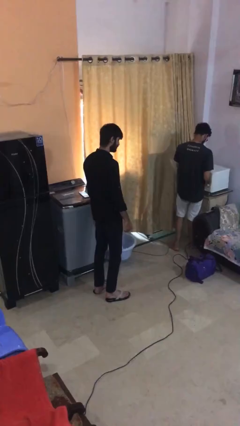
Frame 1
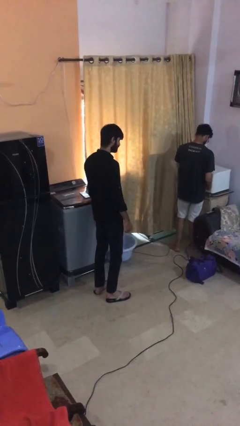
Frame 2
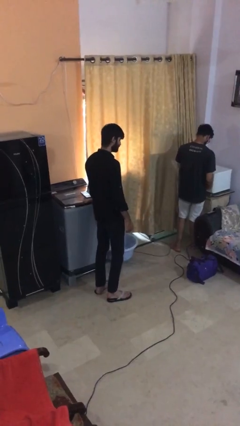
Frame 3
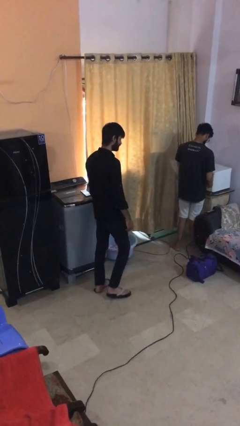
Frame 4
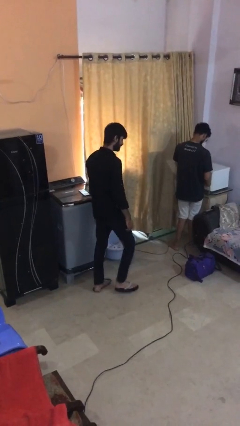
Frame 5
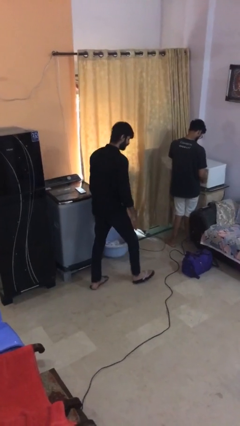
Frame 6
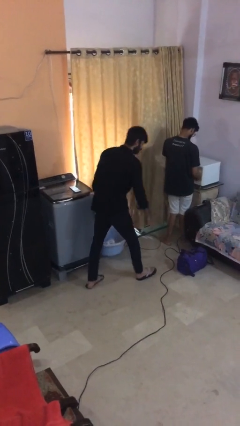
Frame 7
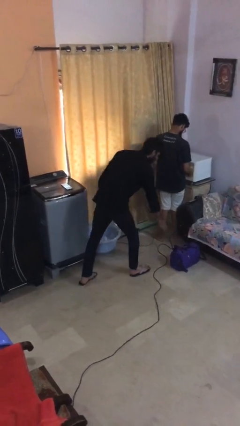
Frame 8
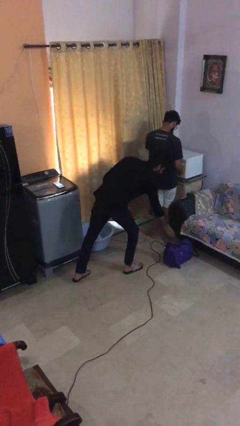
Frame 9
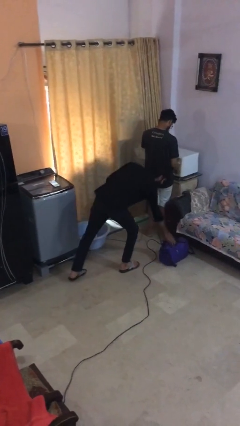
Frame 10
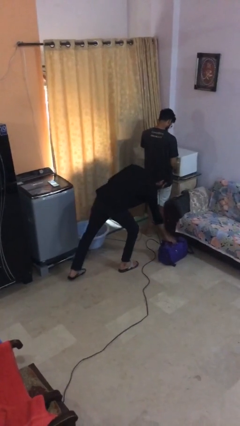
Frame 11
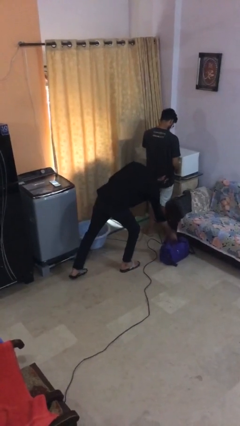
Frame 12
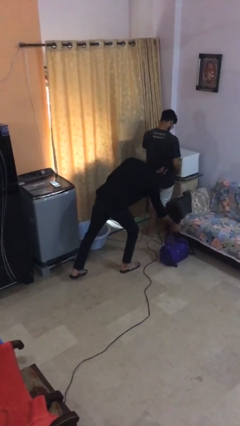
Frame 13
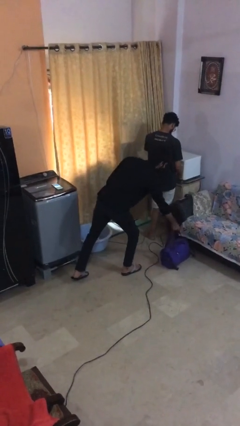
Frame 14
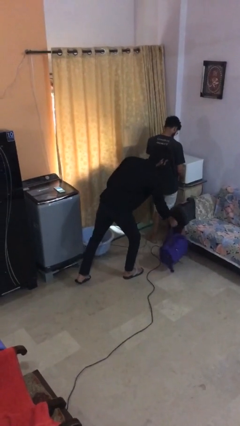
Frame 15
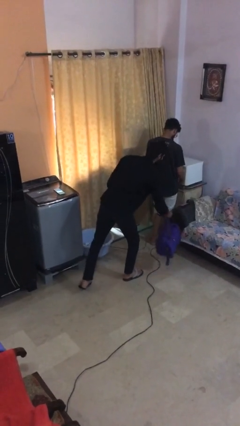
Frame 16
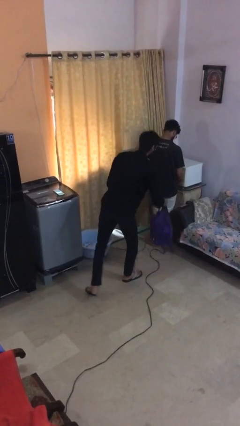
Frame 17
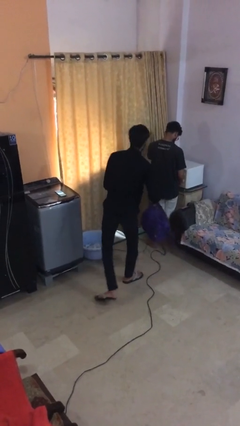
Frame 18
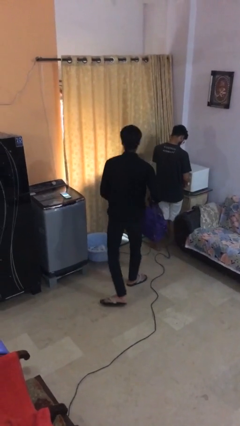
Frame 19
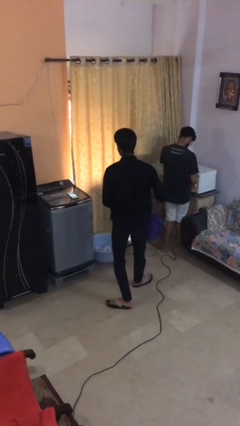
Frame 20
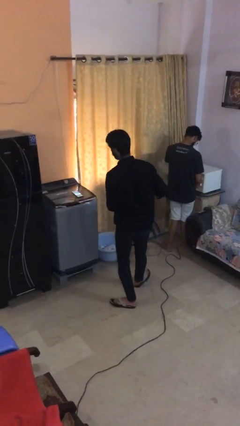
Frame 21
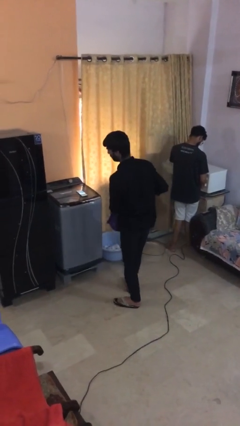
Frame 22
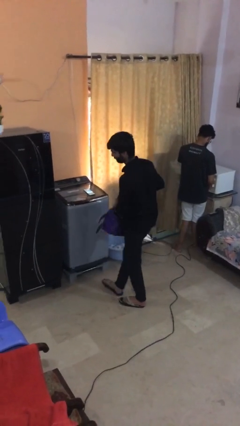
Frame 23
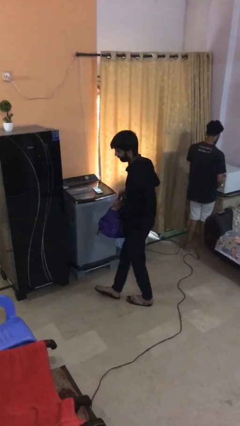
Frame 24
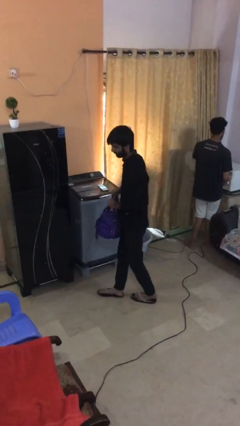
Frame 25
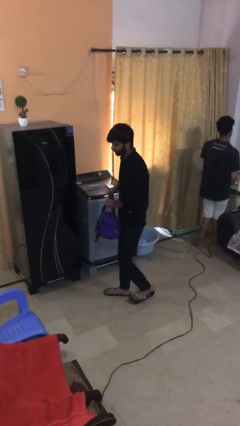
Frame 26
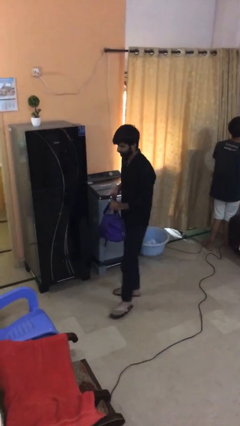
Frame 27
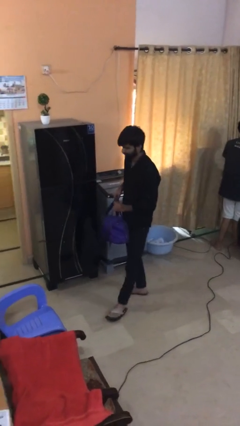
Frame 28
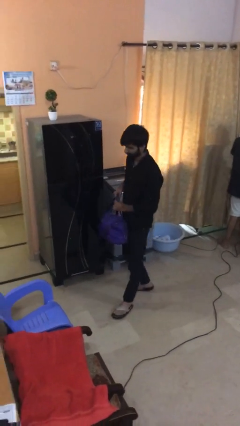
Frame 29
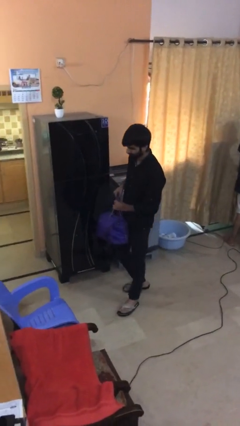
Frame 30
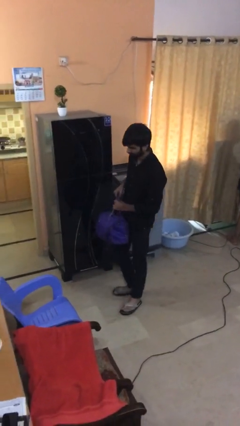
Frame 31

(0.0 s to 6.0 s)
person steals object from person

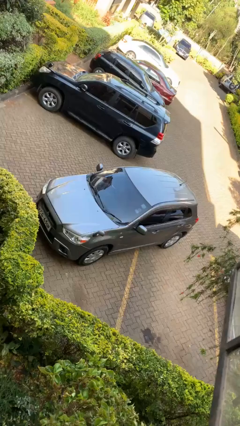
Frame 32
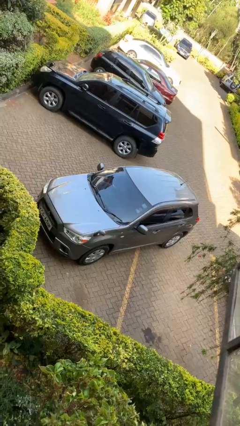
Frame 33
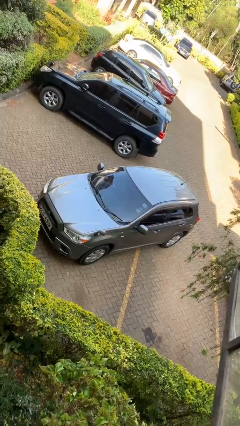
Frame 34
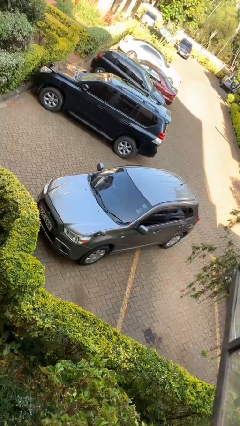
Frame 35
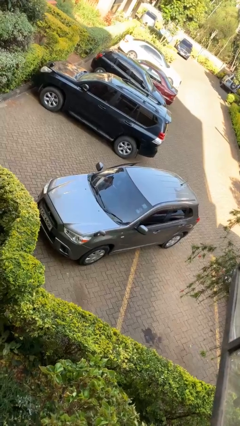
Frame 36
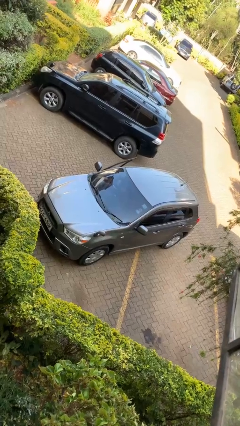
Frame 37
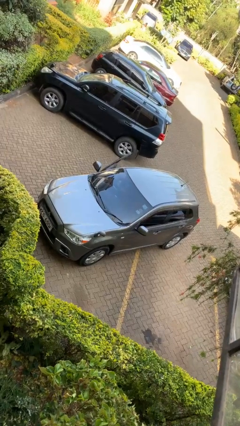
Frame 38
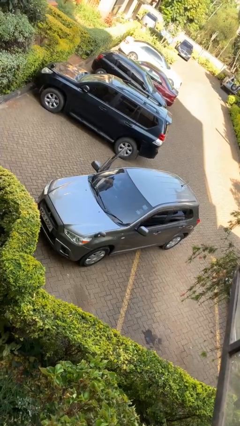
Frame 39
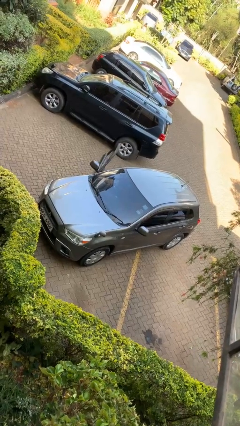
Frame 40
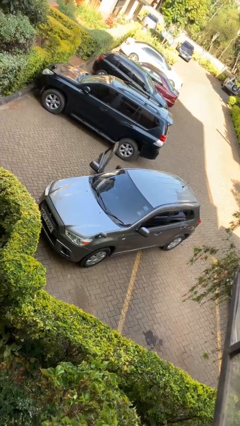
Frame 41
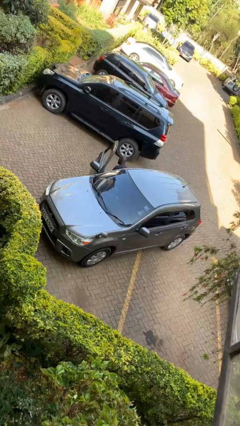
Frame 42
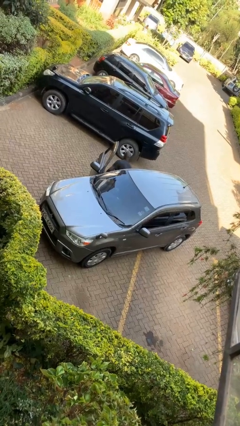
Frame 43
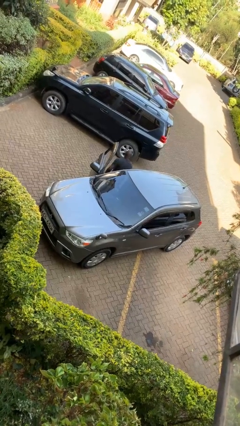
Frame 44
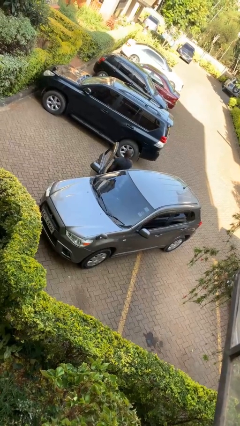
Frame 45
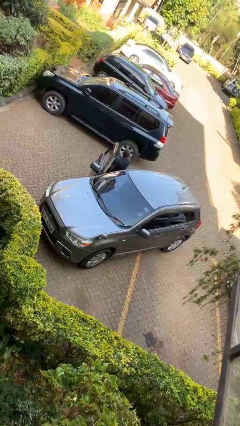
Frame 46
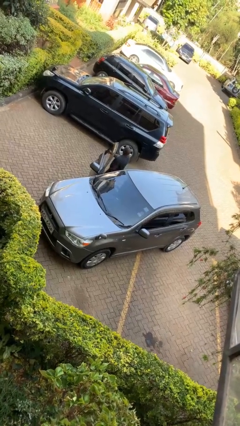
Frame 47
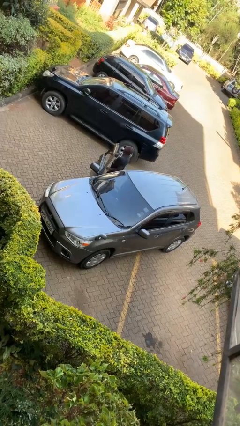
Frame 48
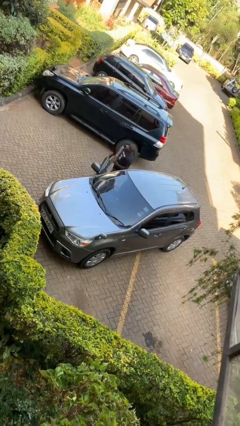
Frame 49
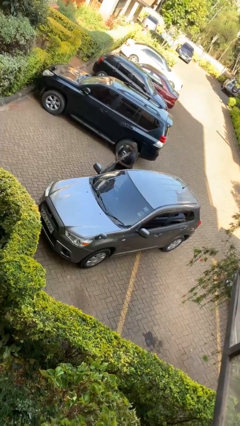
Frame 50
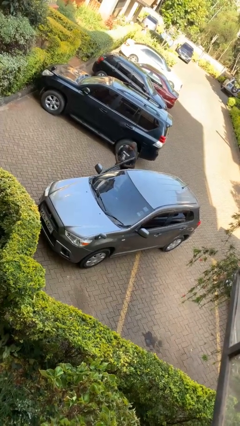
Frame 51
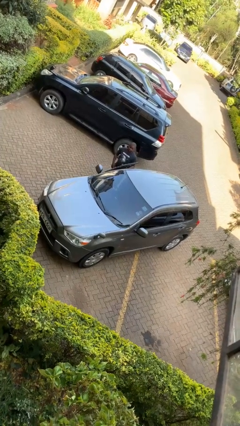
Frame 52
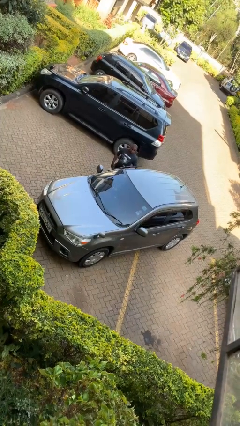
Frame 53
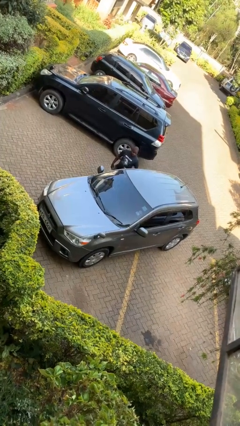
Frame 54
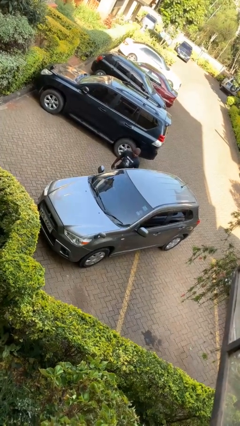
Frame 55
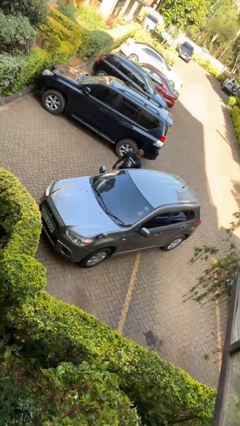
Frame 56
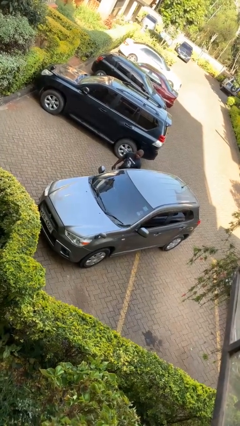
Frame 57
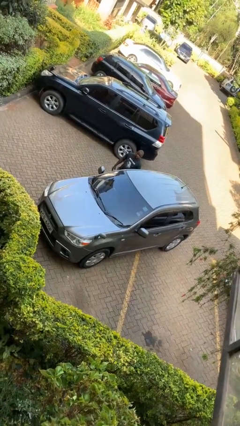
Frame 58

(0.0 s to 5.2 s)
car drops off person

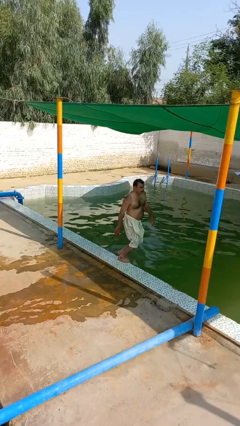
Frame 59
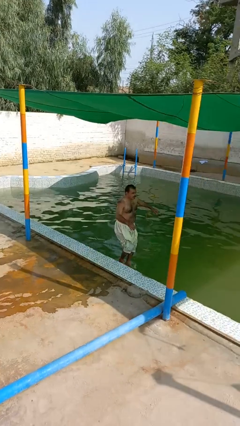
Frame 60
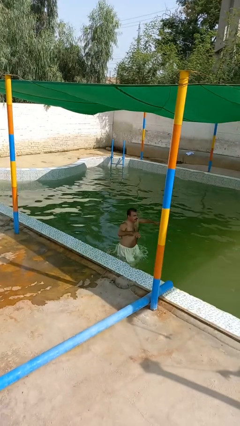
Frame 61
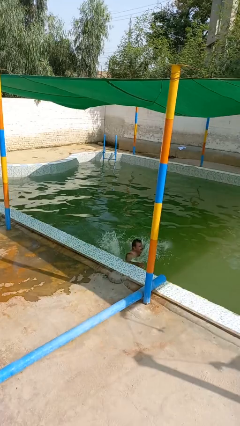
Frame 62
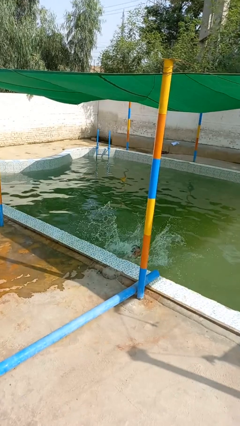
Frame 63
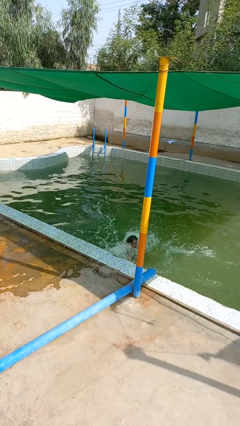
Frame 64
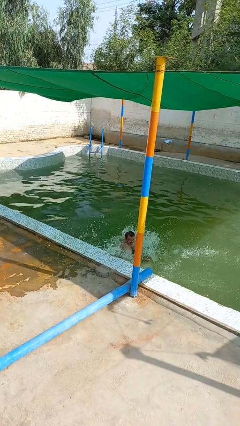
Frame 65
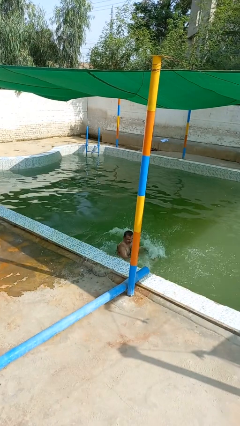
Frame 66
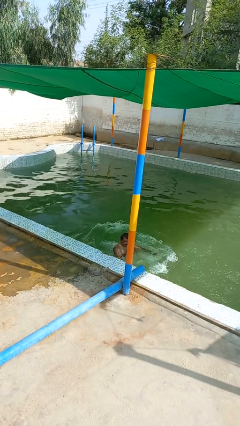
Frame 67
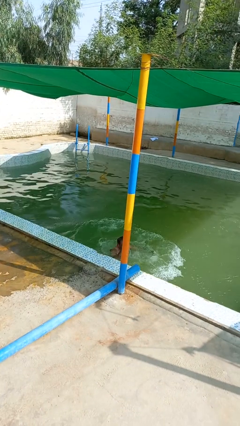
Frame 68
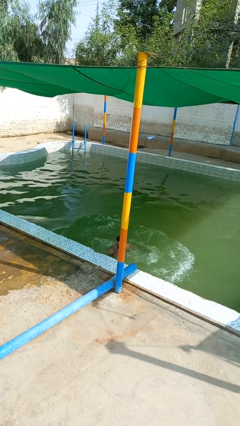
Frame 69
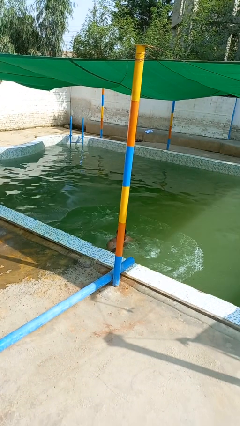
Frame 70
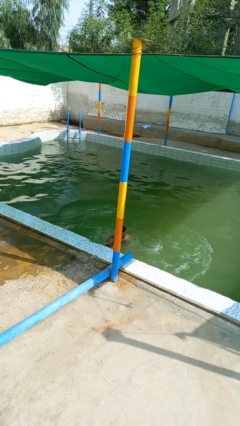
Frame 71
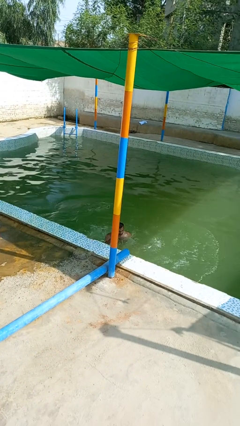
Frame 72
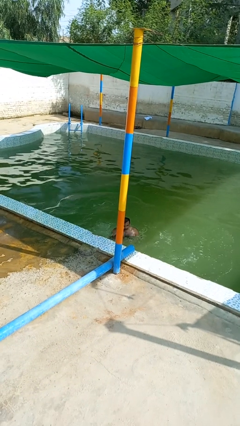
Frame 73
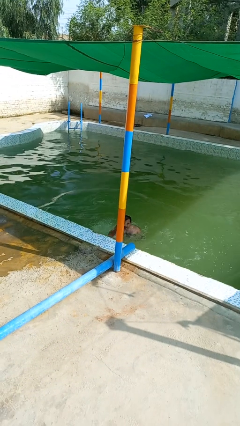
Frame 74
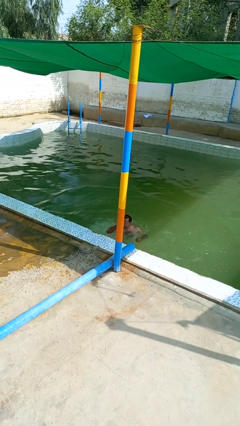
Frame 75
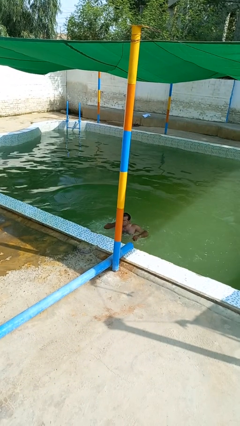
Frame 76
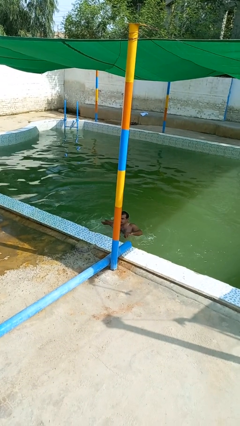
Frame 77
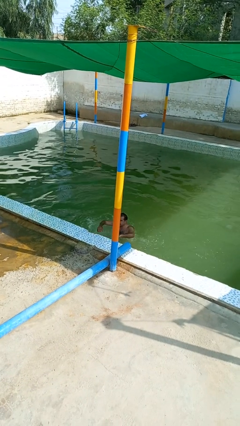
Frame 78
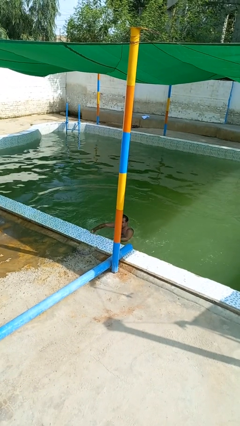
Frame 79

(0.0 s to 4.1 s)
person falls into pool

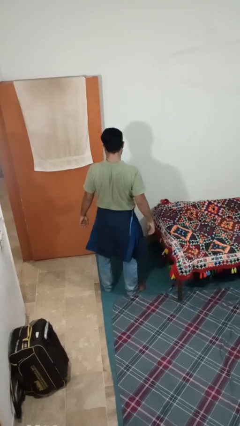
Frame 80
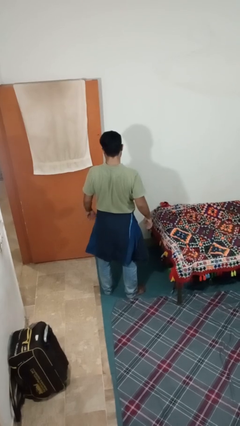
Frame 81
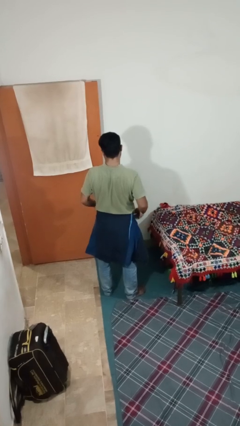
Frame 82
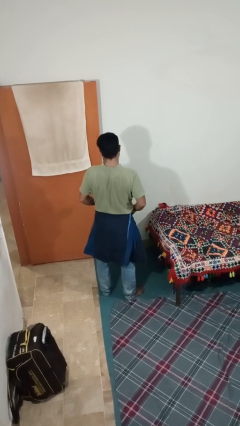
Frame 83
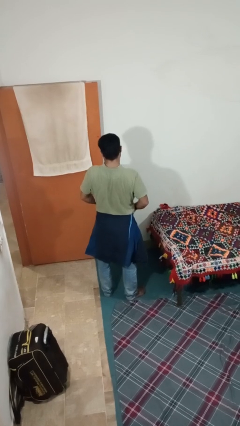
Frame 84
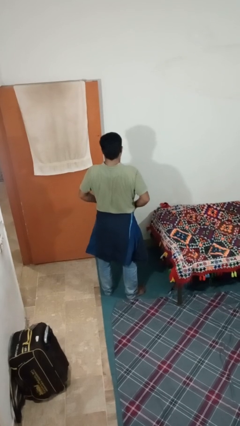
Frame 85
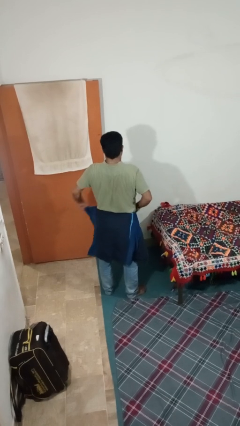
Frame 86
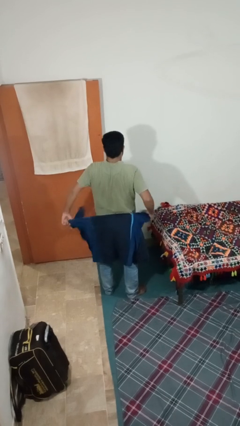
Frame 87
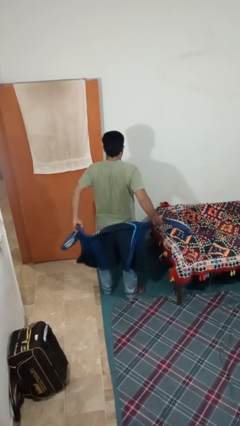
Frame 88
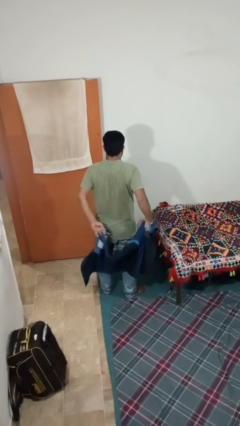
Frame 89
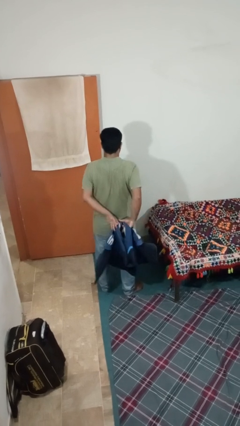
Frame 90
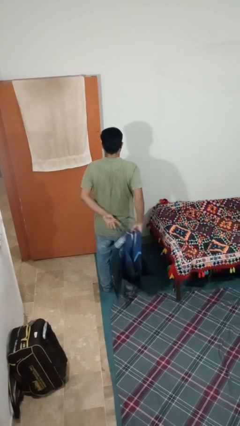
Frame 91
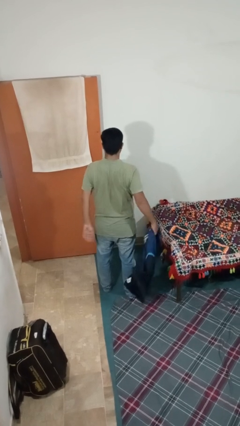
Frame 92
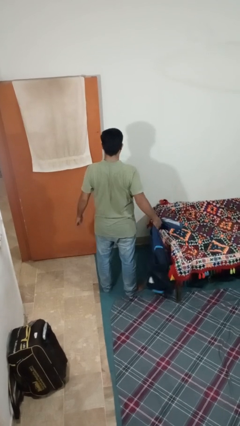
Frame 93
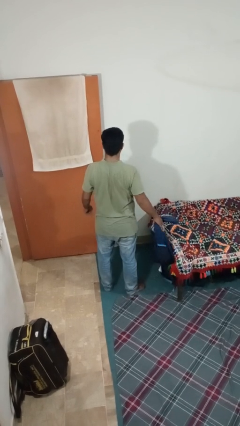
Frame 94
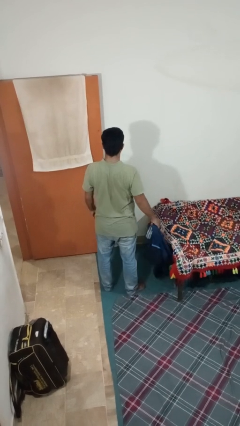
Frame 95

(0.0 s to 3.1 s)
person unties jacket around waist
